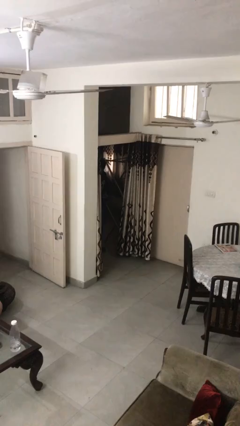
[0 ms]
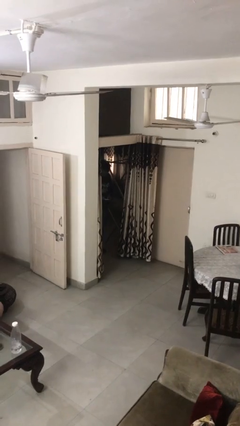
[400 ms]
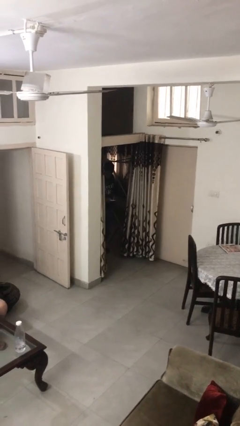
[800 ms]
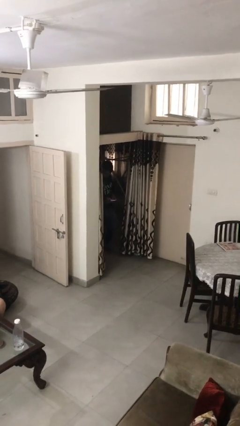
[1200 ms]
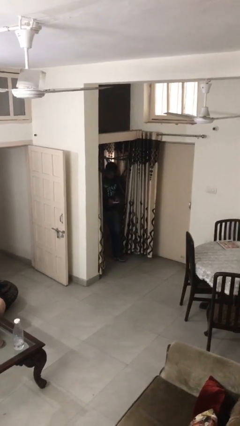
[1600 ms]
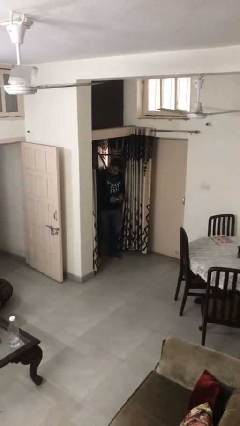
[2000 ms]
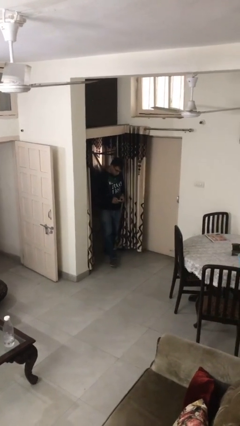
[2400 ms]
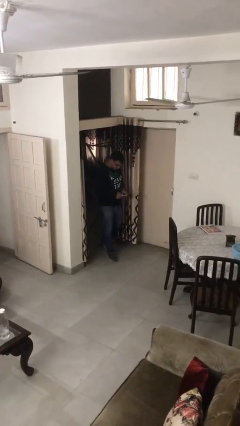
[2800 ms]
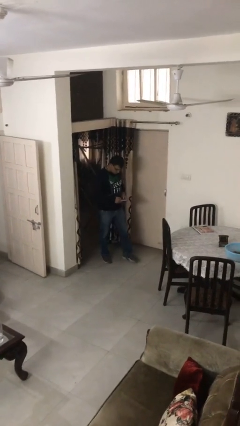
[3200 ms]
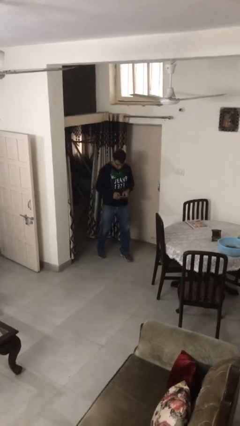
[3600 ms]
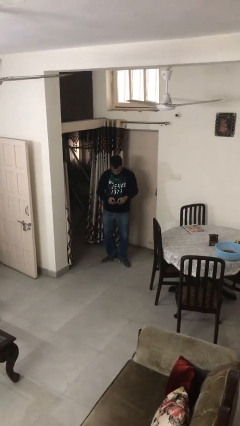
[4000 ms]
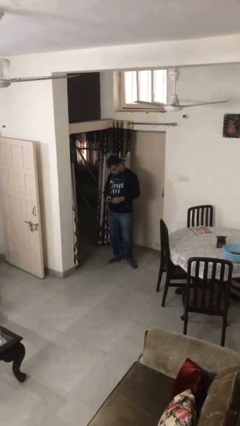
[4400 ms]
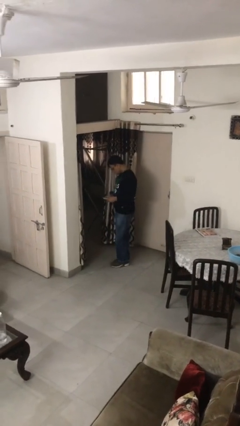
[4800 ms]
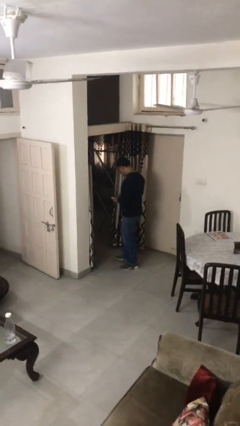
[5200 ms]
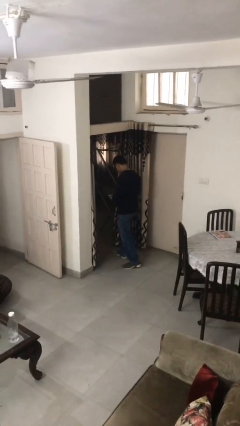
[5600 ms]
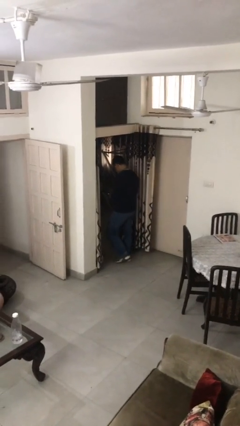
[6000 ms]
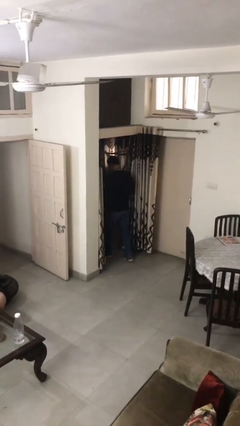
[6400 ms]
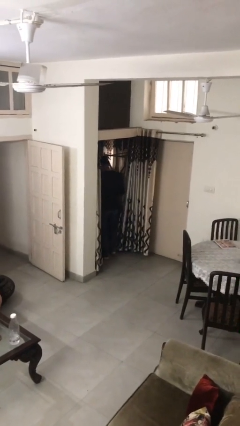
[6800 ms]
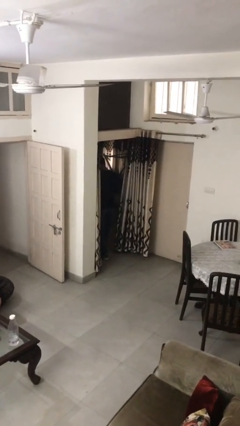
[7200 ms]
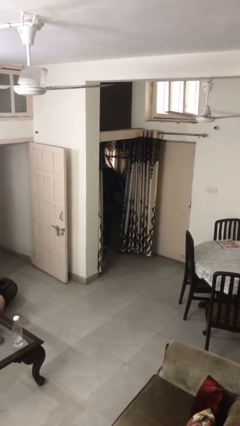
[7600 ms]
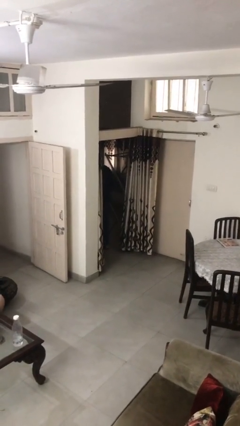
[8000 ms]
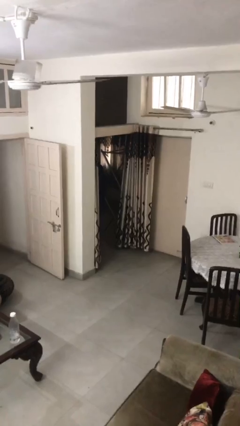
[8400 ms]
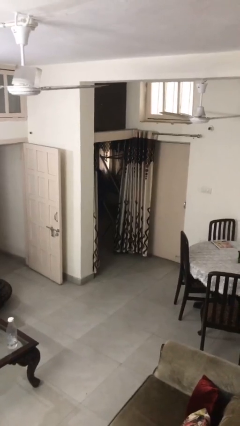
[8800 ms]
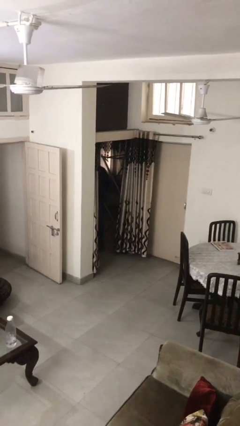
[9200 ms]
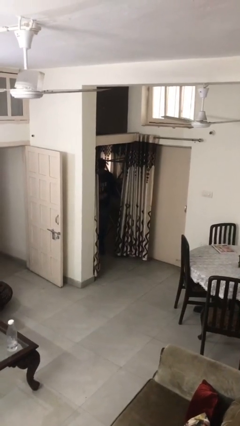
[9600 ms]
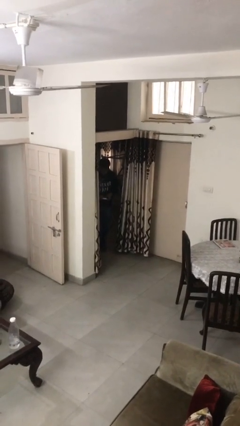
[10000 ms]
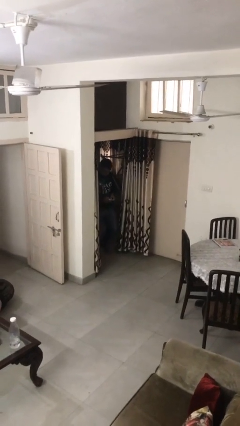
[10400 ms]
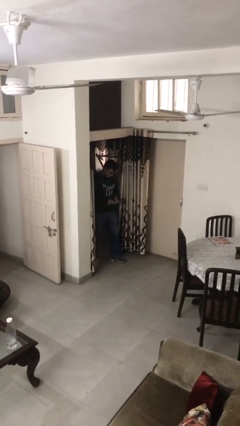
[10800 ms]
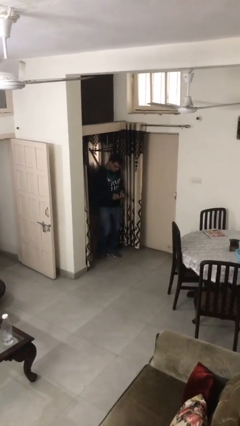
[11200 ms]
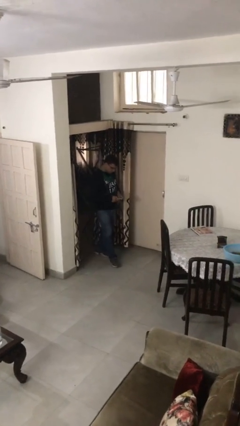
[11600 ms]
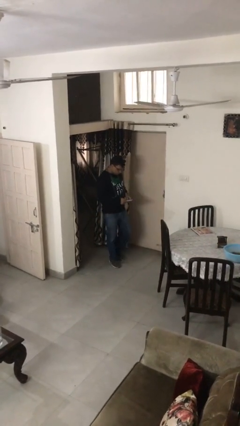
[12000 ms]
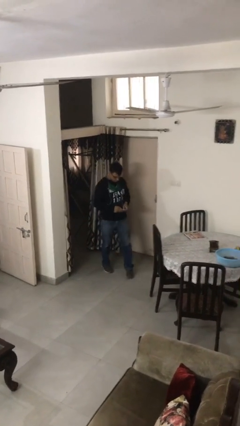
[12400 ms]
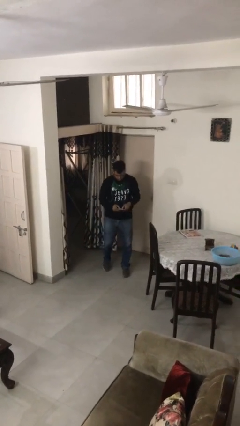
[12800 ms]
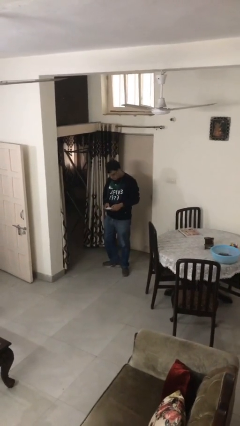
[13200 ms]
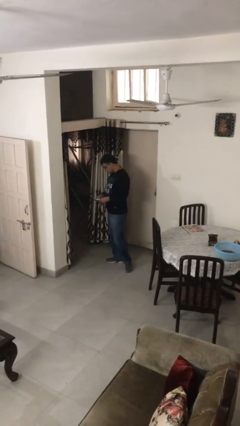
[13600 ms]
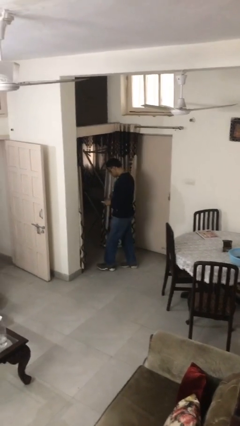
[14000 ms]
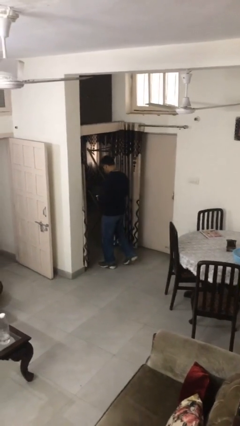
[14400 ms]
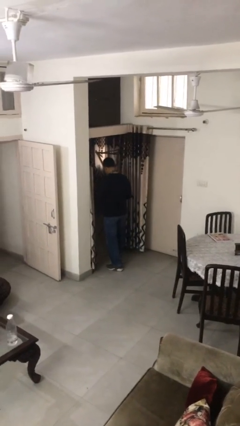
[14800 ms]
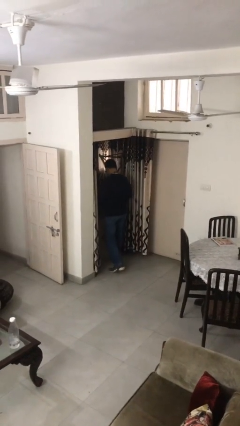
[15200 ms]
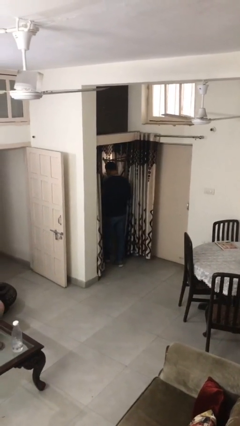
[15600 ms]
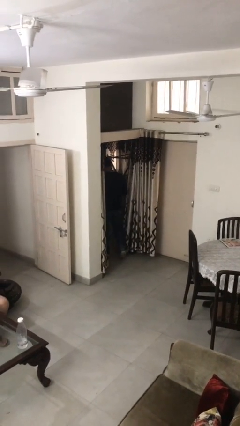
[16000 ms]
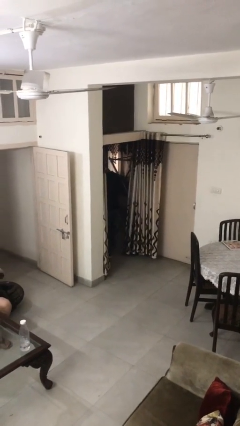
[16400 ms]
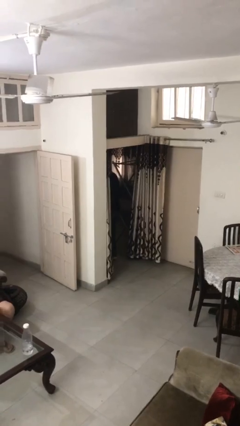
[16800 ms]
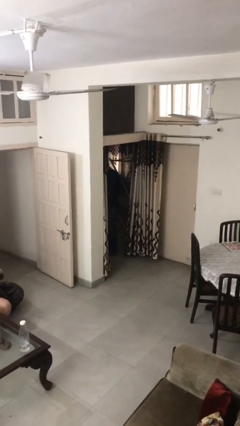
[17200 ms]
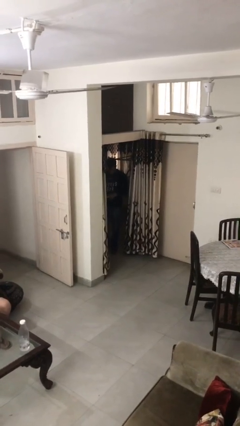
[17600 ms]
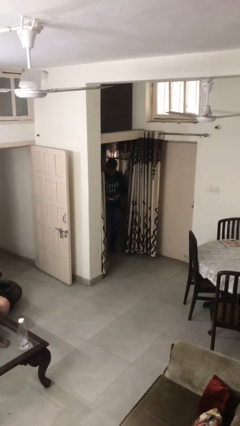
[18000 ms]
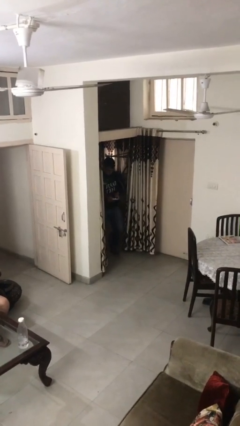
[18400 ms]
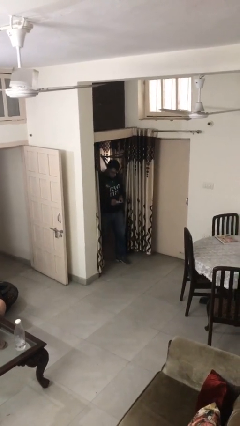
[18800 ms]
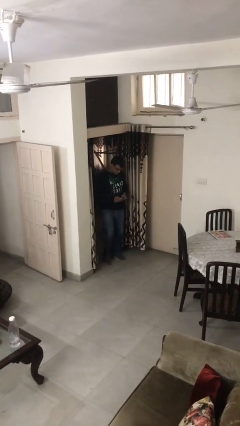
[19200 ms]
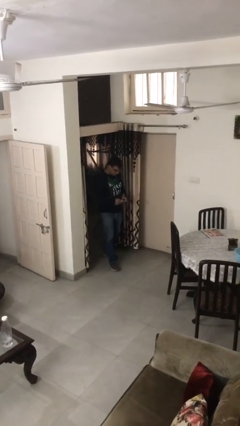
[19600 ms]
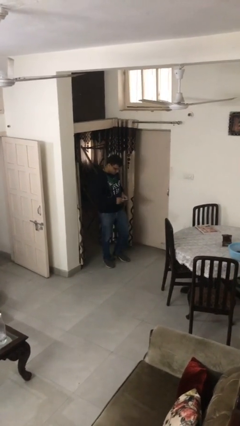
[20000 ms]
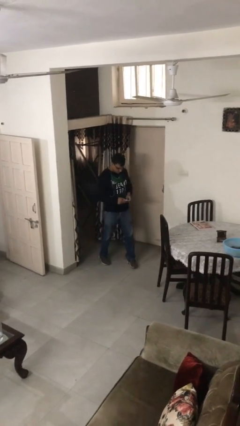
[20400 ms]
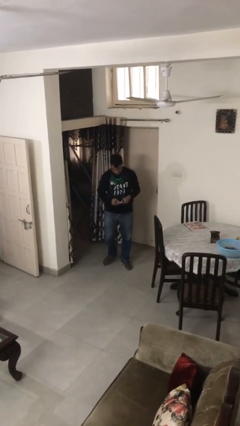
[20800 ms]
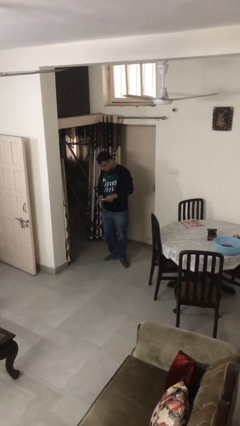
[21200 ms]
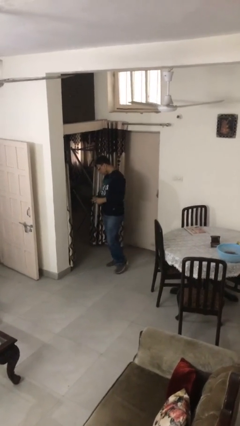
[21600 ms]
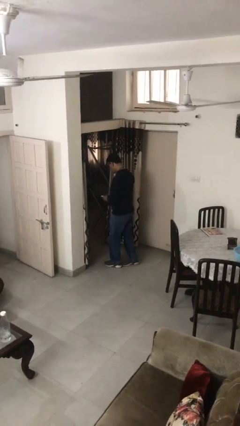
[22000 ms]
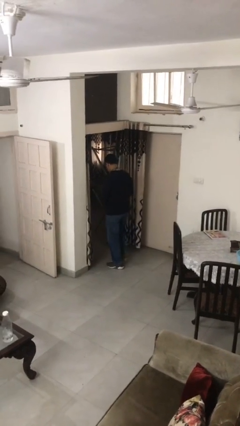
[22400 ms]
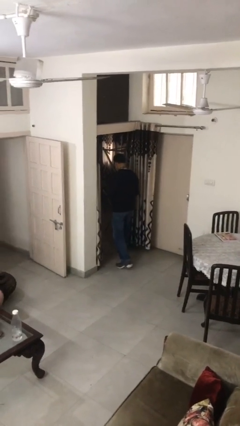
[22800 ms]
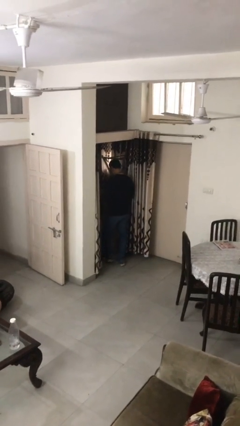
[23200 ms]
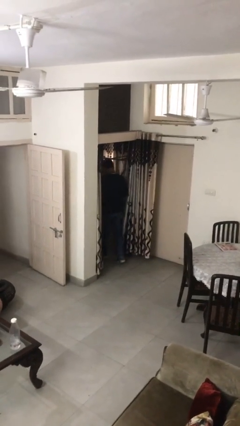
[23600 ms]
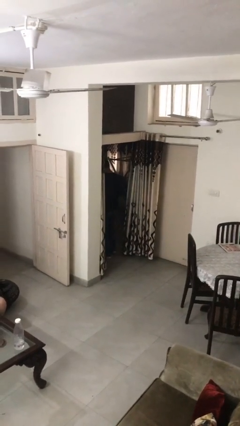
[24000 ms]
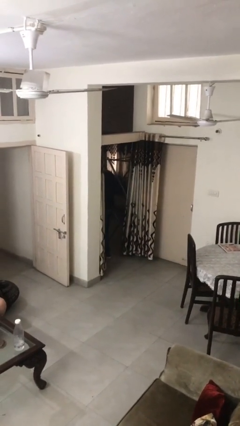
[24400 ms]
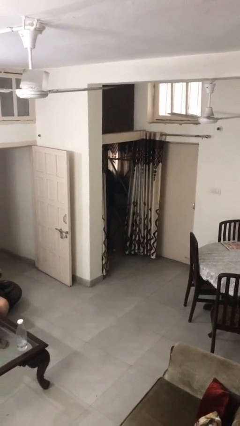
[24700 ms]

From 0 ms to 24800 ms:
person texts on phone

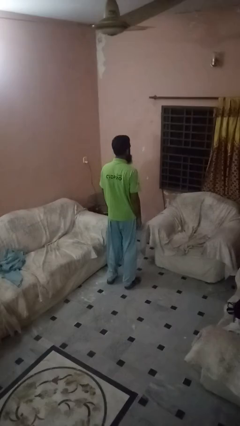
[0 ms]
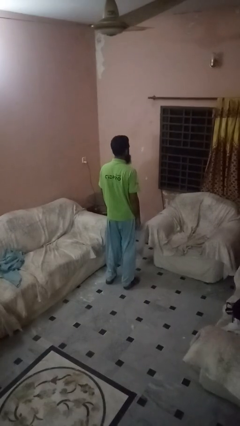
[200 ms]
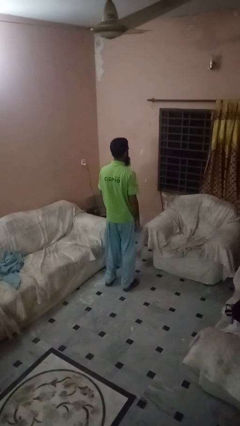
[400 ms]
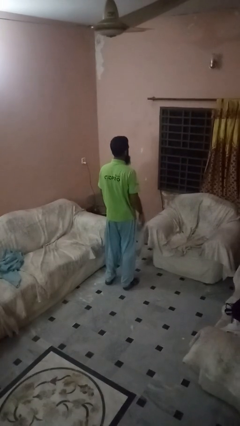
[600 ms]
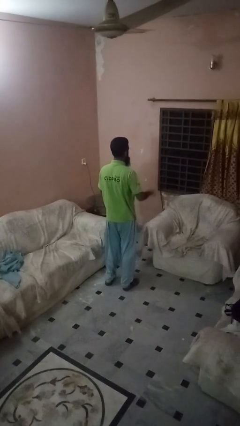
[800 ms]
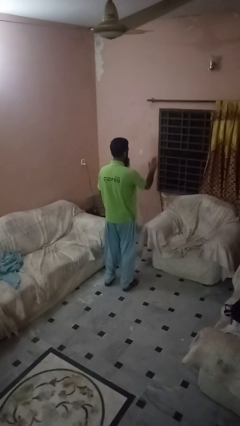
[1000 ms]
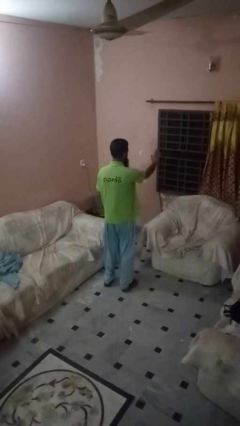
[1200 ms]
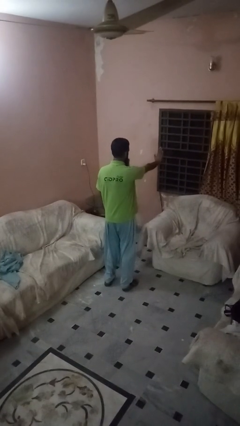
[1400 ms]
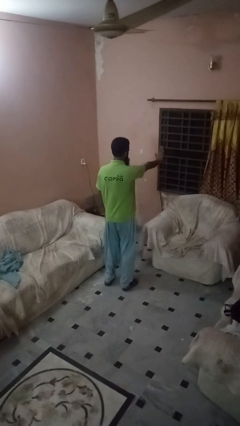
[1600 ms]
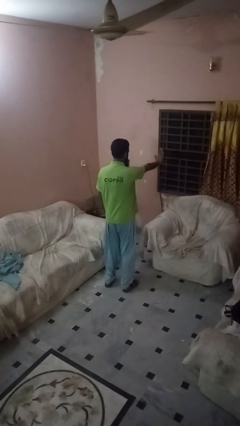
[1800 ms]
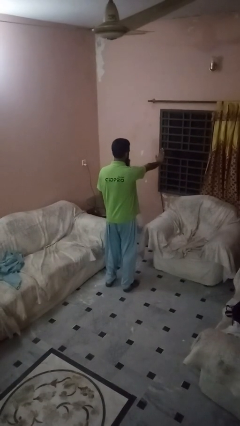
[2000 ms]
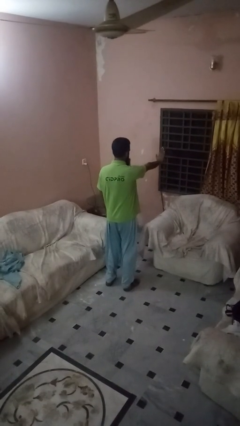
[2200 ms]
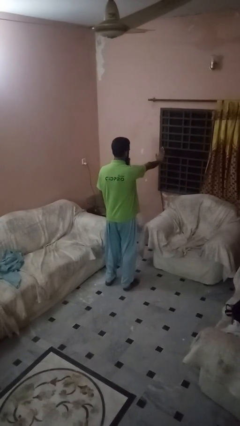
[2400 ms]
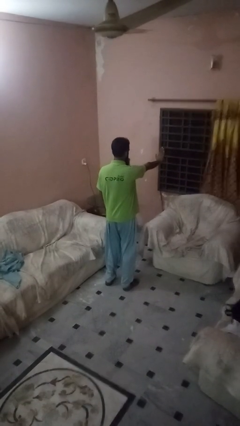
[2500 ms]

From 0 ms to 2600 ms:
person gestures stop

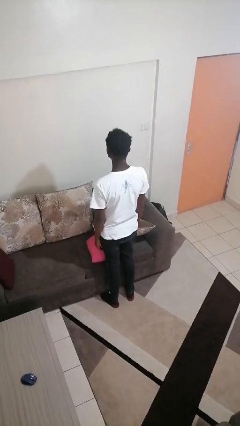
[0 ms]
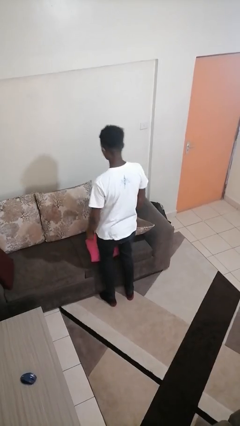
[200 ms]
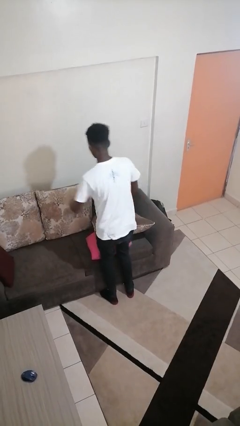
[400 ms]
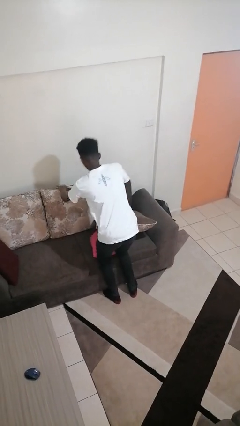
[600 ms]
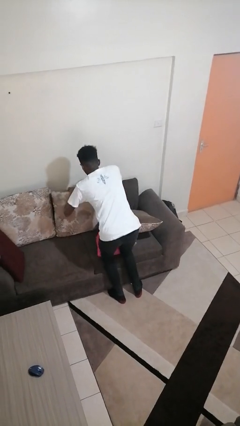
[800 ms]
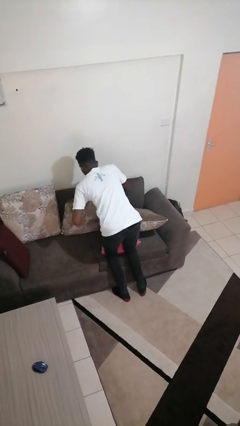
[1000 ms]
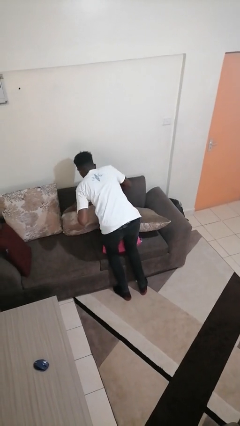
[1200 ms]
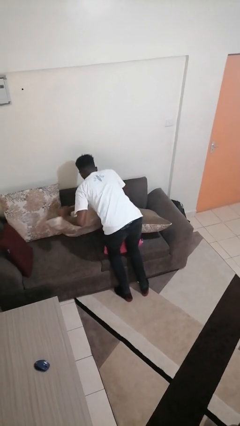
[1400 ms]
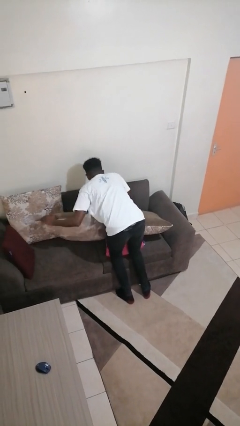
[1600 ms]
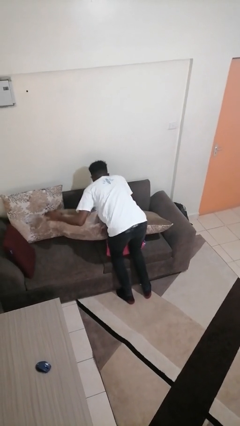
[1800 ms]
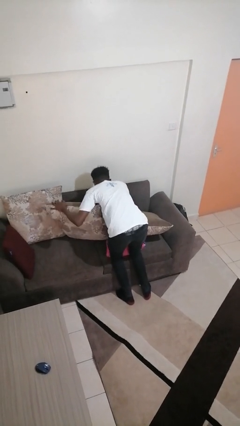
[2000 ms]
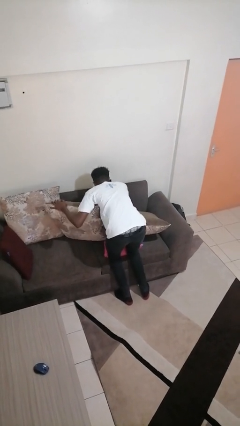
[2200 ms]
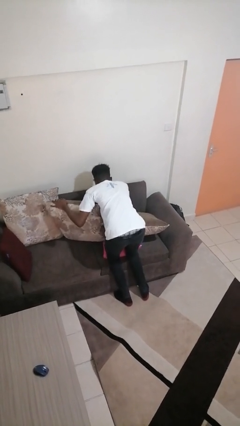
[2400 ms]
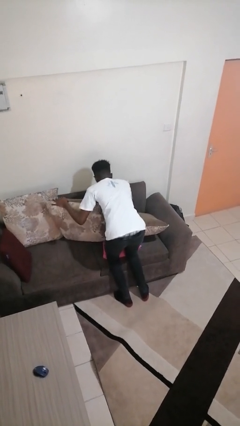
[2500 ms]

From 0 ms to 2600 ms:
person searches in couch

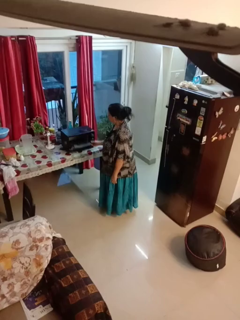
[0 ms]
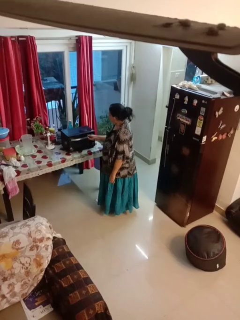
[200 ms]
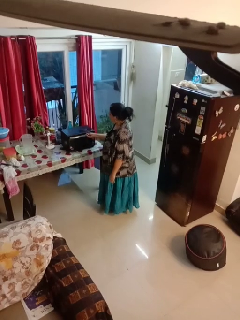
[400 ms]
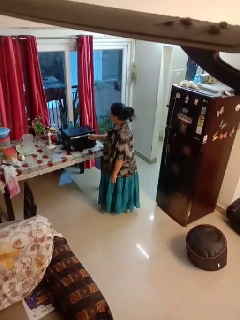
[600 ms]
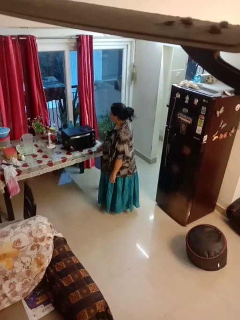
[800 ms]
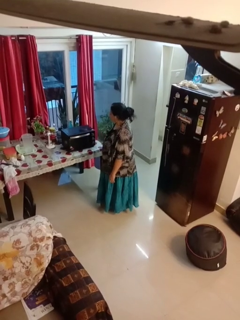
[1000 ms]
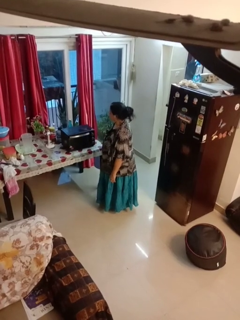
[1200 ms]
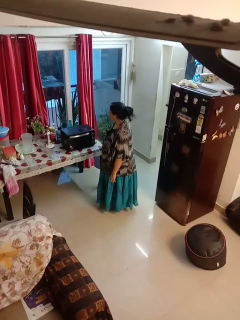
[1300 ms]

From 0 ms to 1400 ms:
person closes microwave
